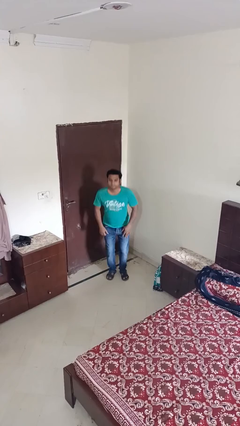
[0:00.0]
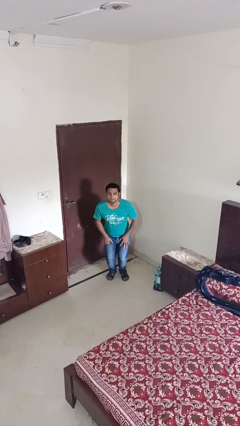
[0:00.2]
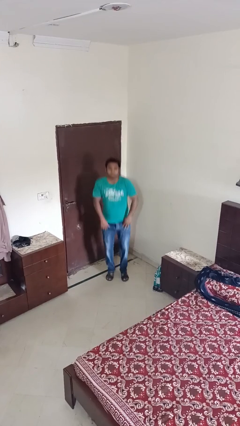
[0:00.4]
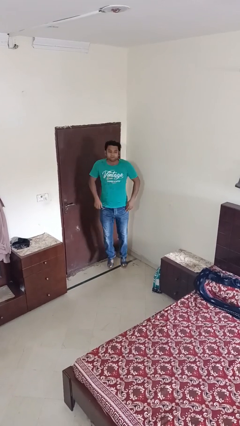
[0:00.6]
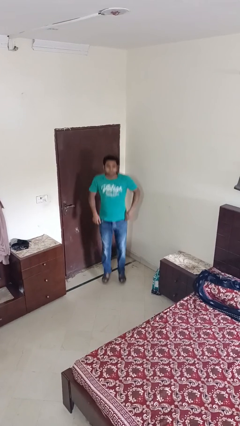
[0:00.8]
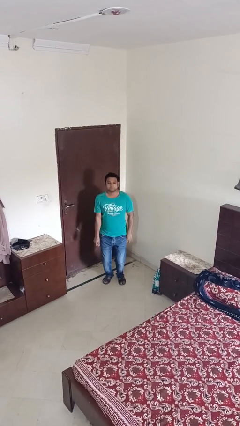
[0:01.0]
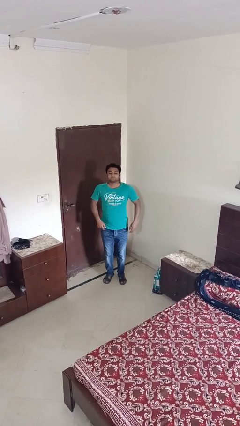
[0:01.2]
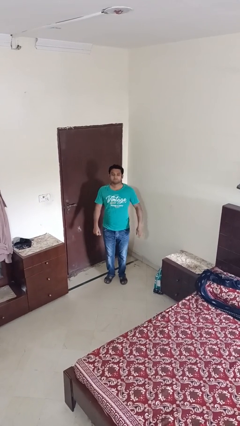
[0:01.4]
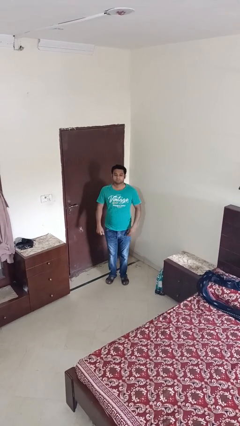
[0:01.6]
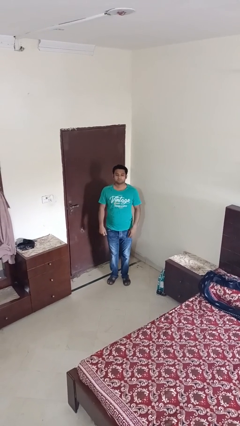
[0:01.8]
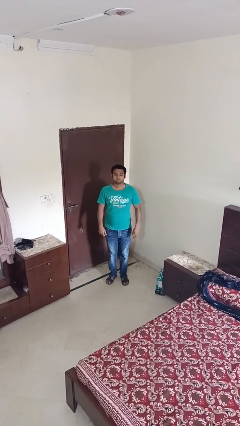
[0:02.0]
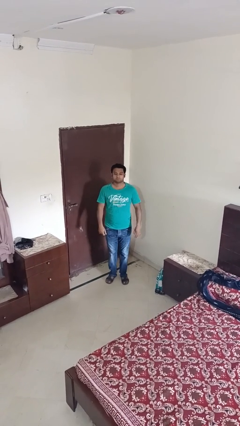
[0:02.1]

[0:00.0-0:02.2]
person jumps

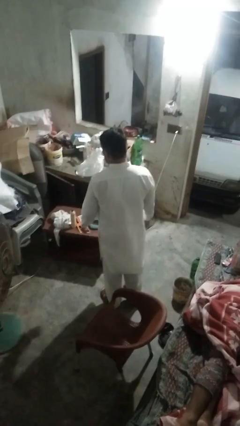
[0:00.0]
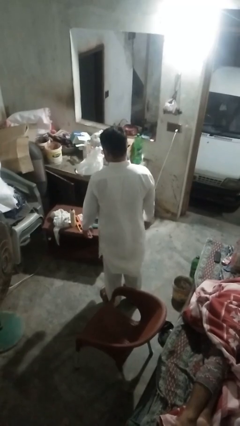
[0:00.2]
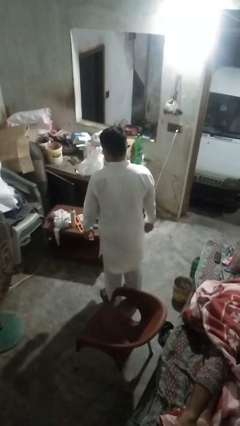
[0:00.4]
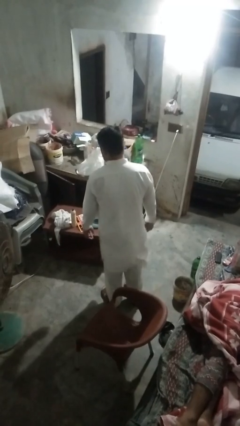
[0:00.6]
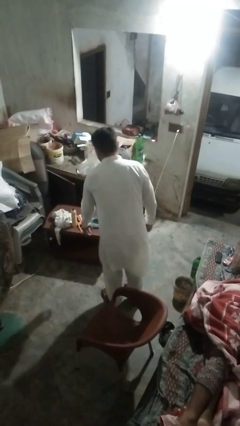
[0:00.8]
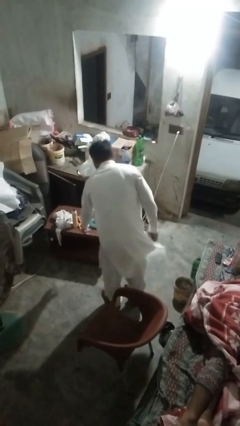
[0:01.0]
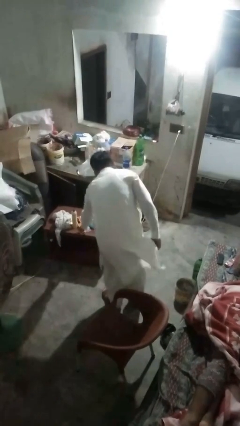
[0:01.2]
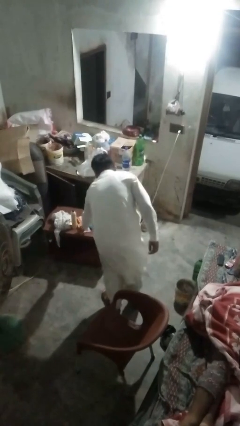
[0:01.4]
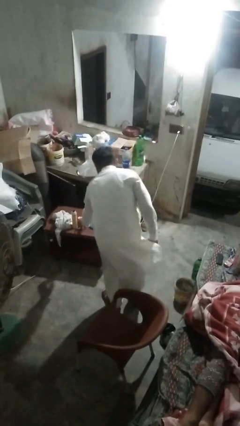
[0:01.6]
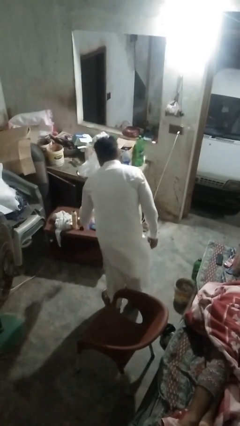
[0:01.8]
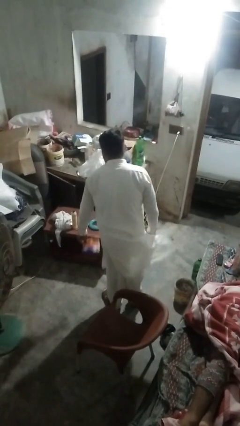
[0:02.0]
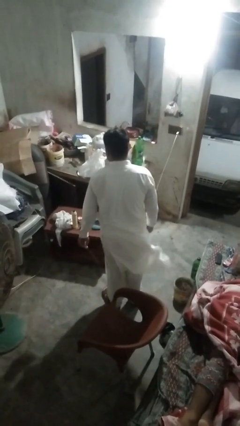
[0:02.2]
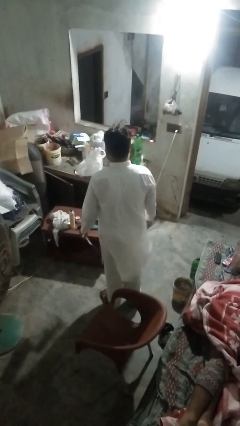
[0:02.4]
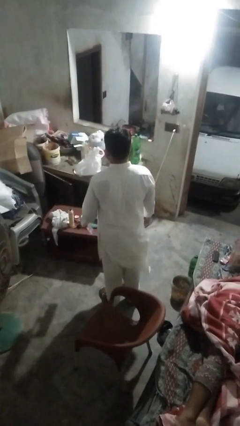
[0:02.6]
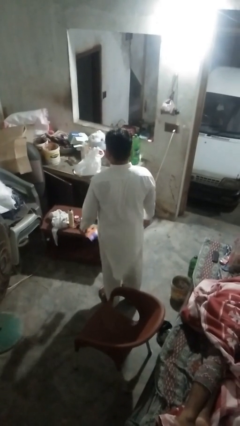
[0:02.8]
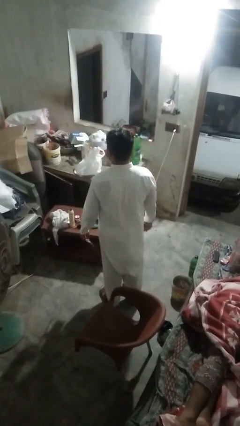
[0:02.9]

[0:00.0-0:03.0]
person picks up object from table

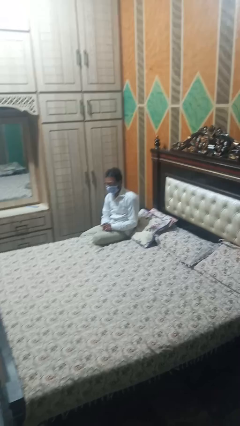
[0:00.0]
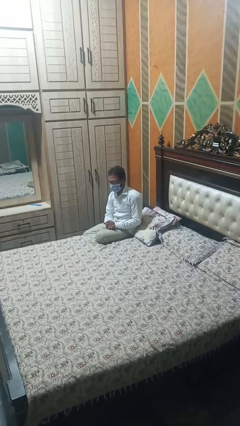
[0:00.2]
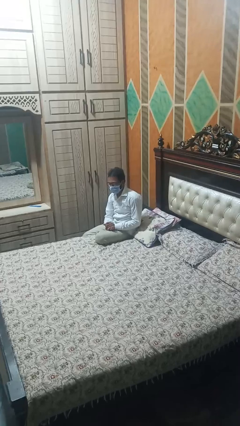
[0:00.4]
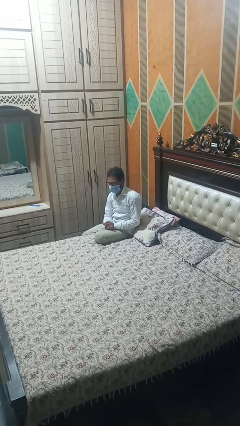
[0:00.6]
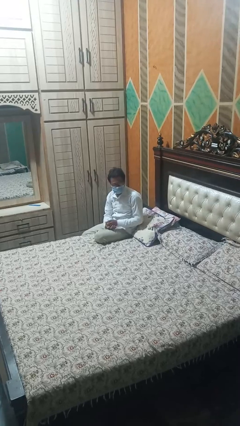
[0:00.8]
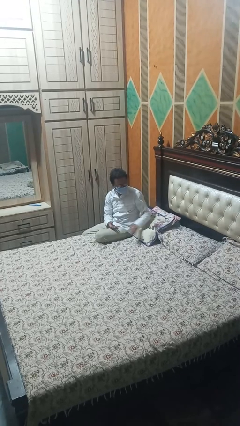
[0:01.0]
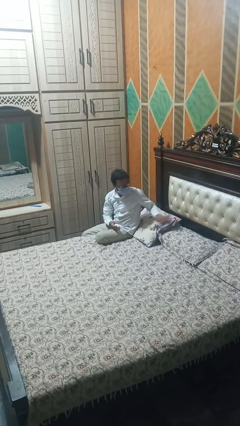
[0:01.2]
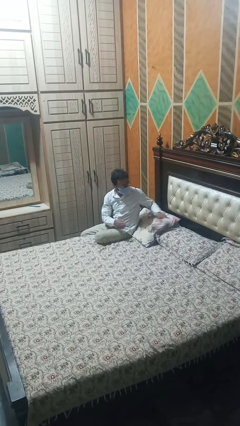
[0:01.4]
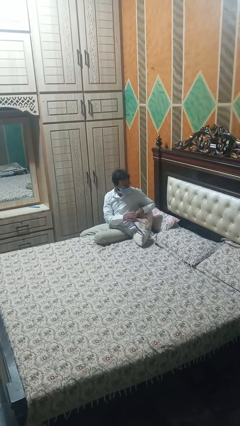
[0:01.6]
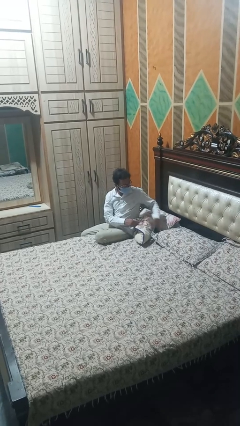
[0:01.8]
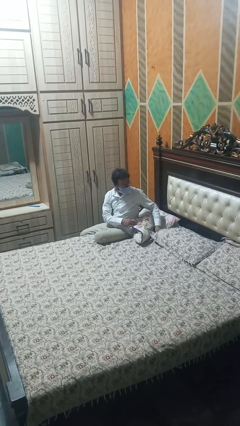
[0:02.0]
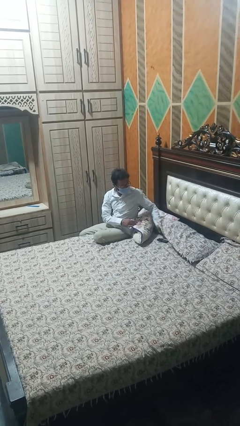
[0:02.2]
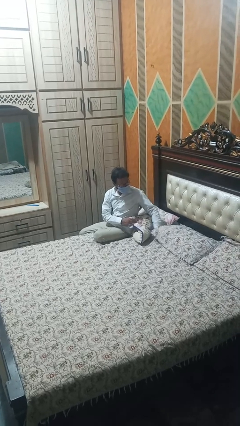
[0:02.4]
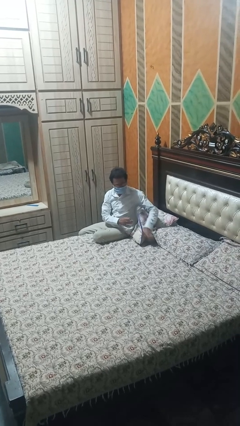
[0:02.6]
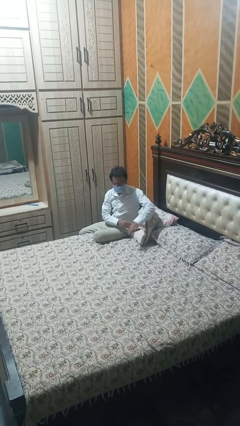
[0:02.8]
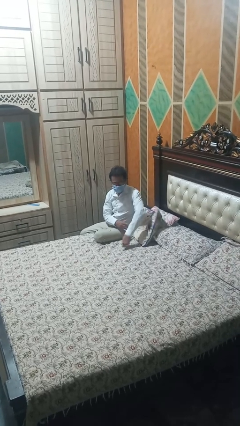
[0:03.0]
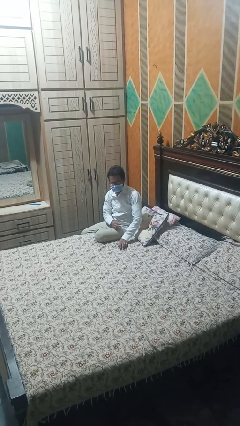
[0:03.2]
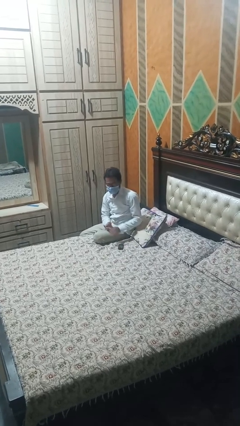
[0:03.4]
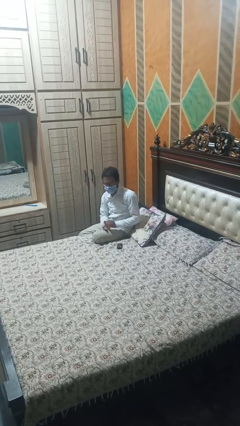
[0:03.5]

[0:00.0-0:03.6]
person searches under bed

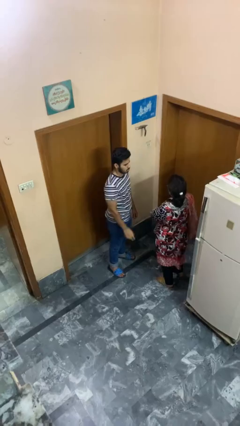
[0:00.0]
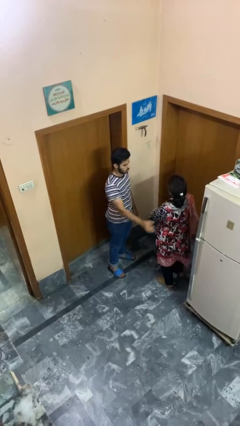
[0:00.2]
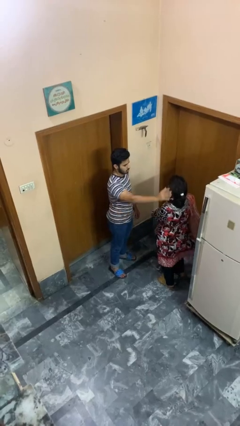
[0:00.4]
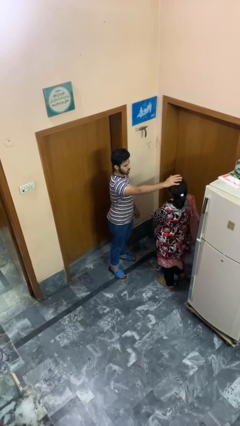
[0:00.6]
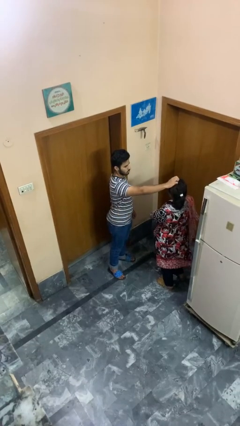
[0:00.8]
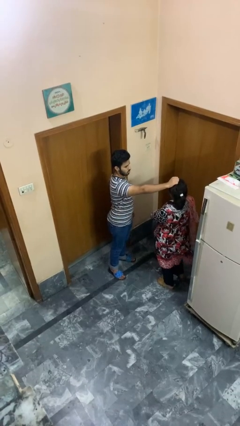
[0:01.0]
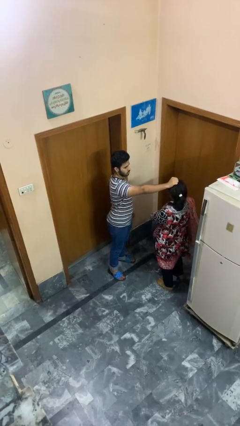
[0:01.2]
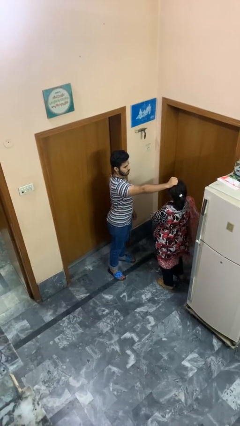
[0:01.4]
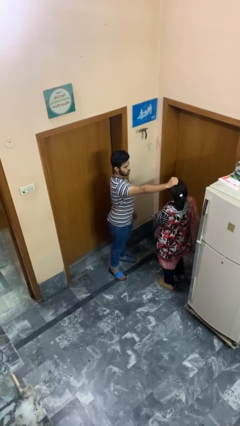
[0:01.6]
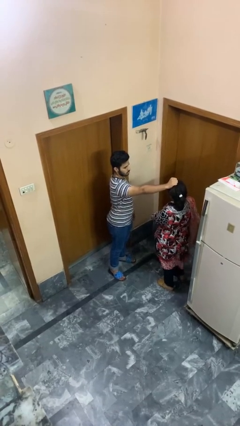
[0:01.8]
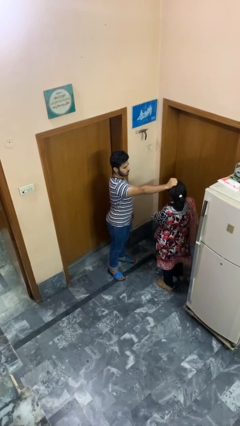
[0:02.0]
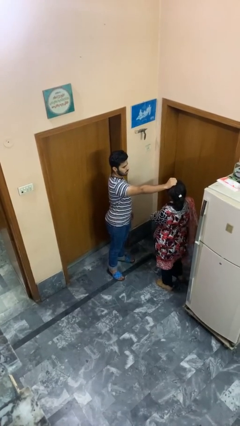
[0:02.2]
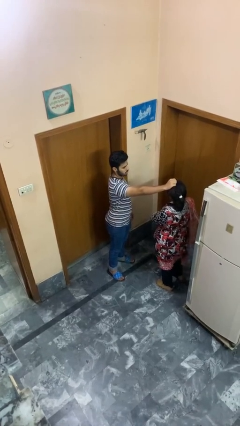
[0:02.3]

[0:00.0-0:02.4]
person grabs person by hair

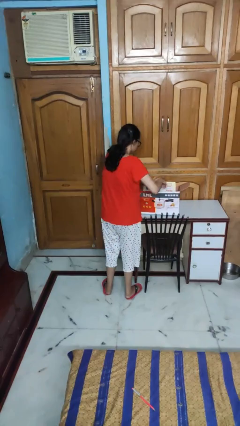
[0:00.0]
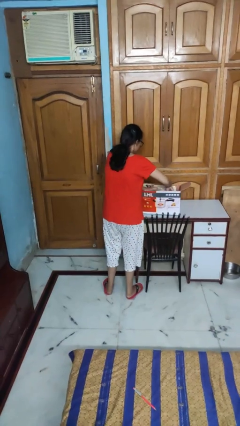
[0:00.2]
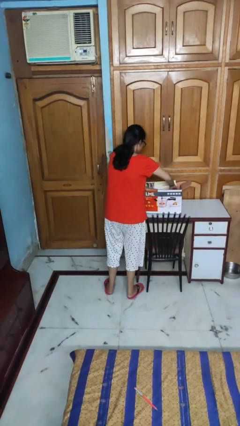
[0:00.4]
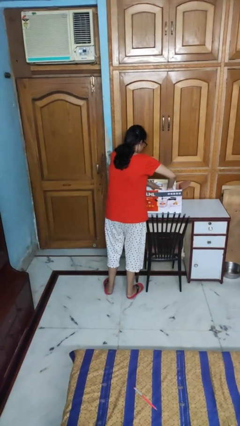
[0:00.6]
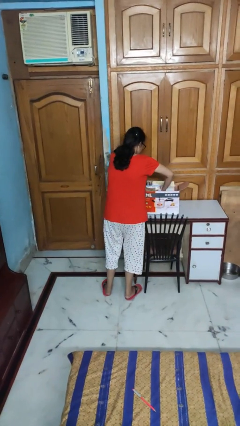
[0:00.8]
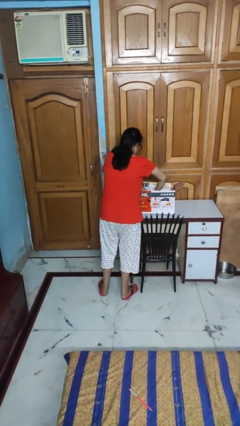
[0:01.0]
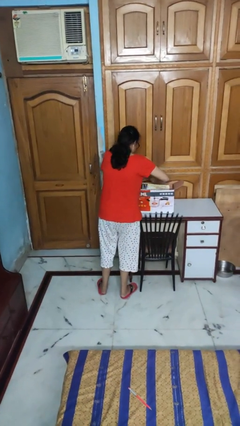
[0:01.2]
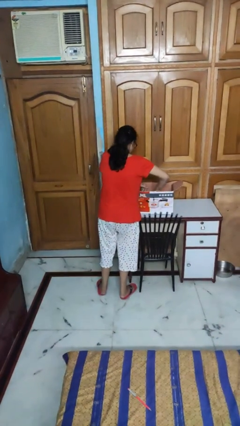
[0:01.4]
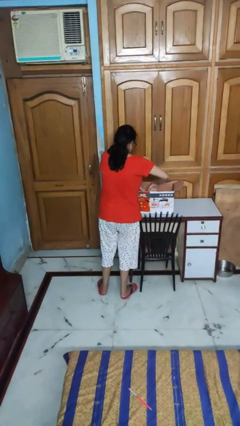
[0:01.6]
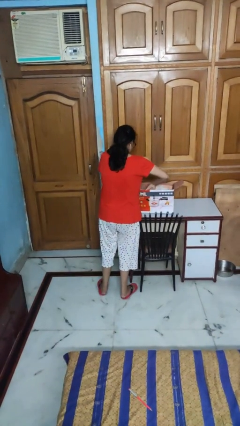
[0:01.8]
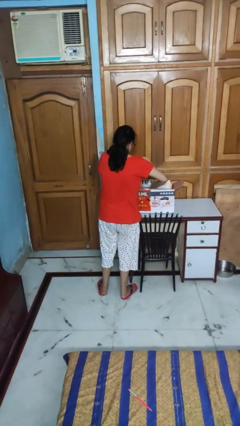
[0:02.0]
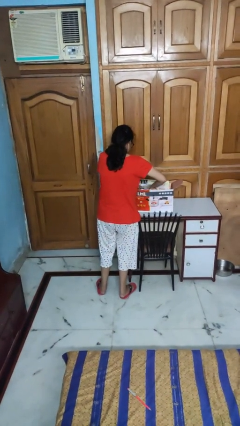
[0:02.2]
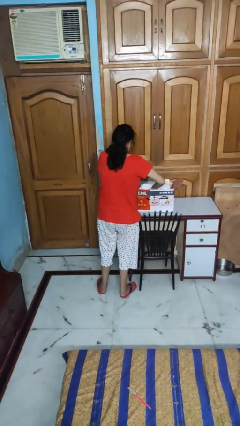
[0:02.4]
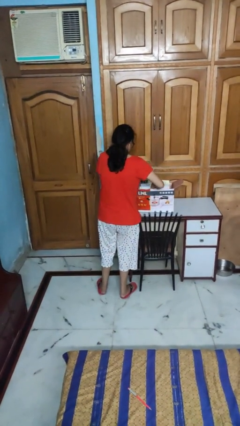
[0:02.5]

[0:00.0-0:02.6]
person searches in box

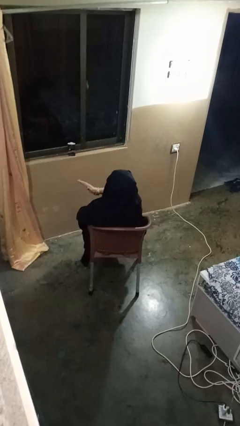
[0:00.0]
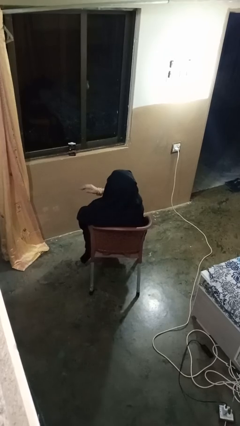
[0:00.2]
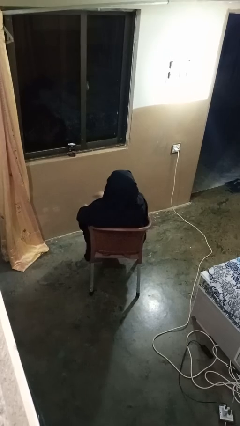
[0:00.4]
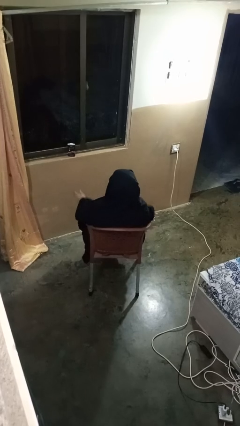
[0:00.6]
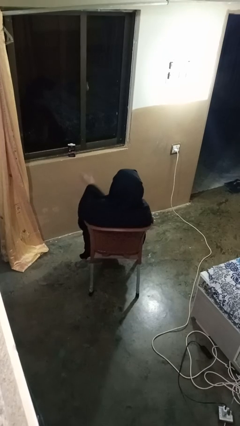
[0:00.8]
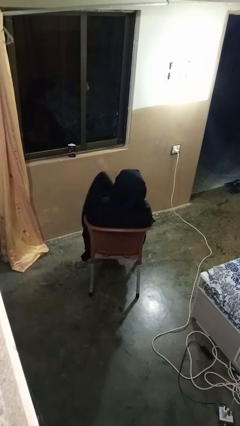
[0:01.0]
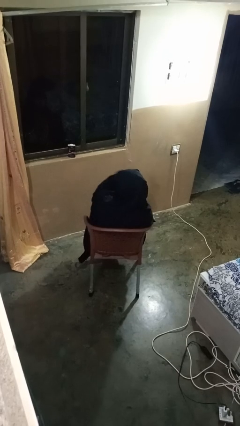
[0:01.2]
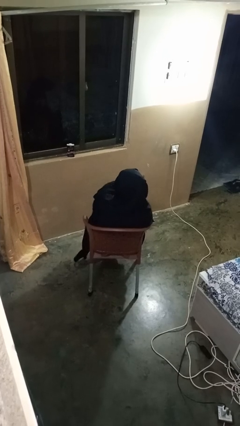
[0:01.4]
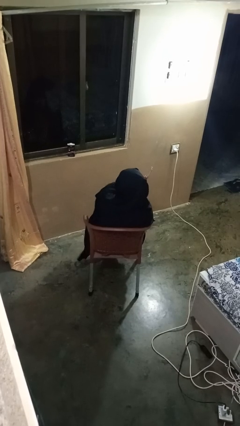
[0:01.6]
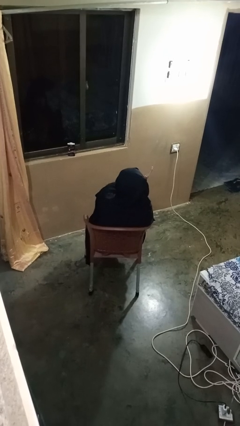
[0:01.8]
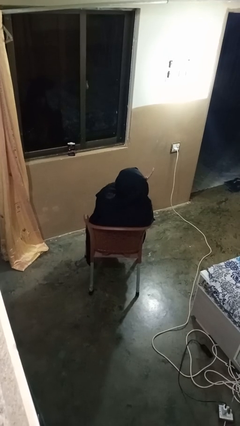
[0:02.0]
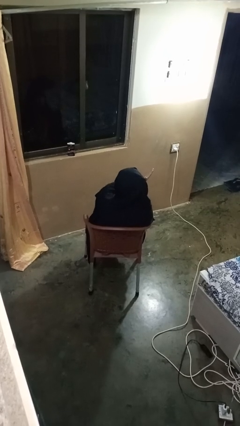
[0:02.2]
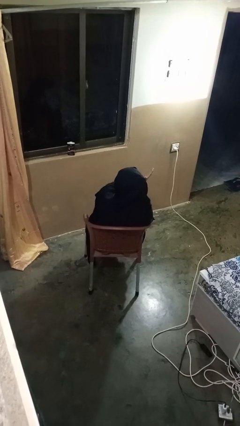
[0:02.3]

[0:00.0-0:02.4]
person gestures swipe right

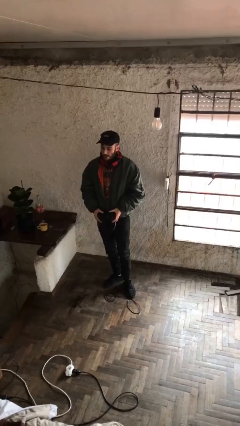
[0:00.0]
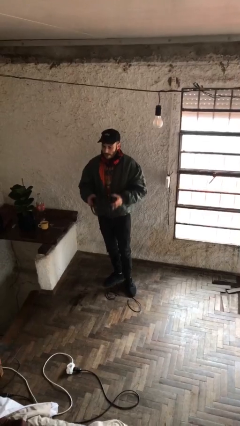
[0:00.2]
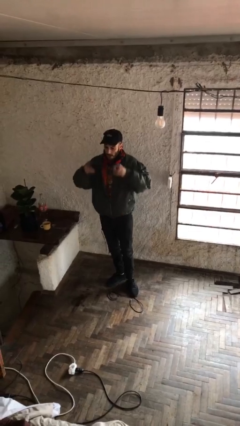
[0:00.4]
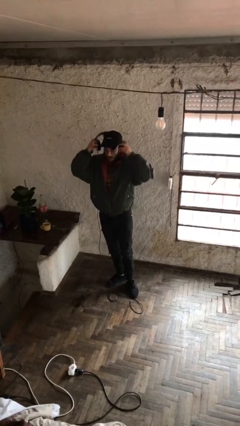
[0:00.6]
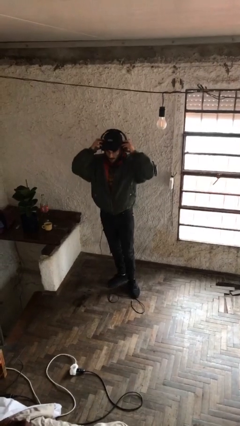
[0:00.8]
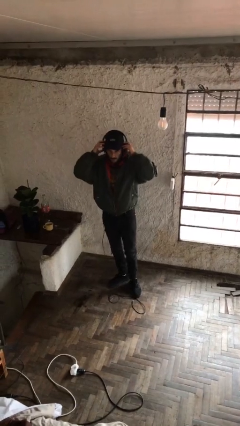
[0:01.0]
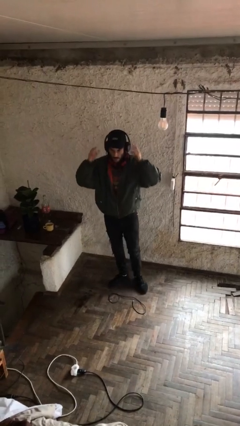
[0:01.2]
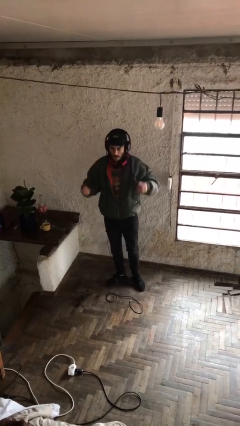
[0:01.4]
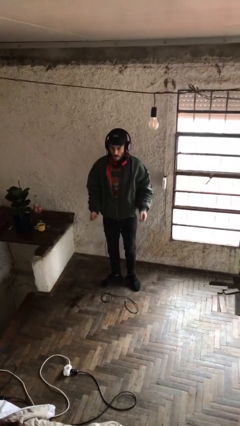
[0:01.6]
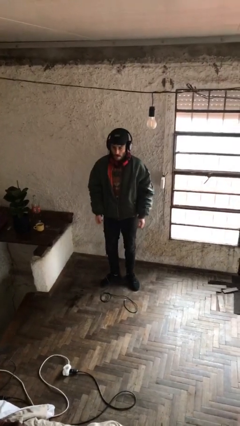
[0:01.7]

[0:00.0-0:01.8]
person puts on headphones
